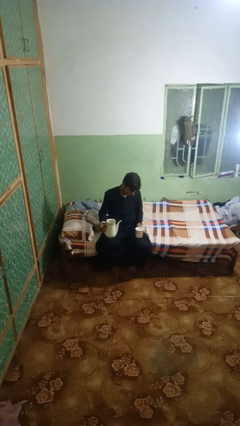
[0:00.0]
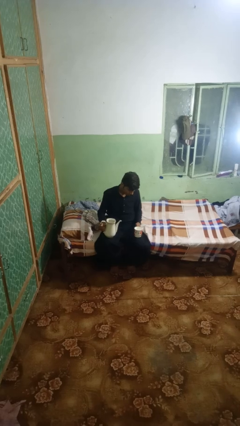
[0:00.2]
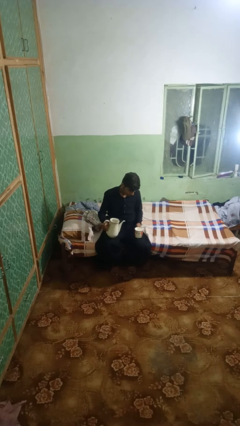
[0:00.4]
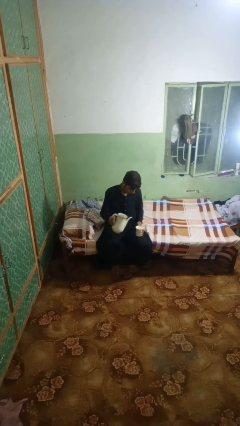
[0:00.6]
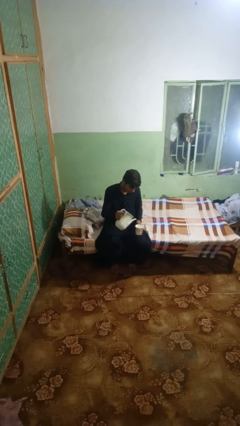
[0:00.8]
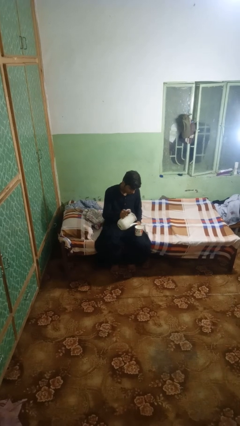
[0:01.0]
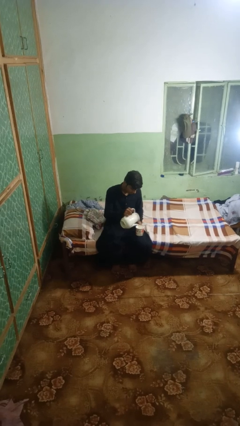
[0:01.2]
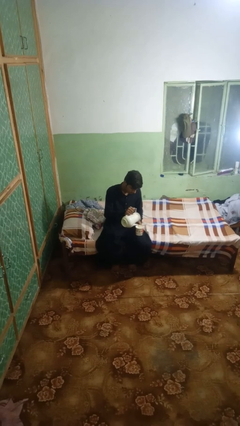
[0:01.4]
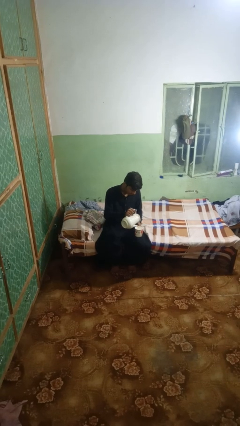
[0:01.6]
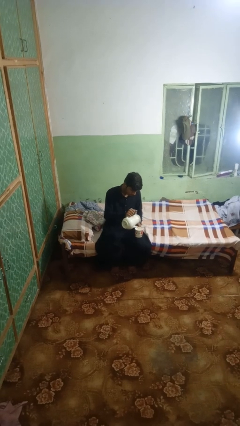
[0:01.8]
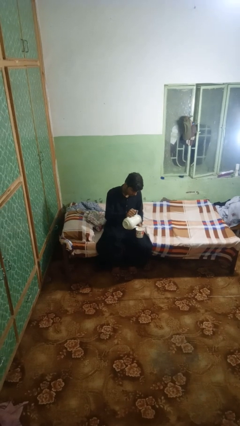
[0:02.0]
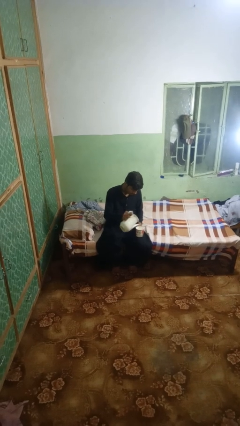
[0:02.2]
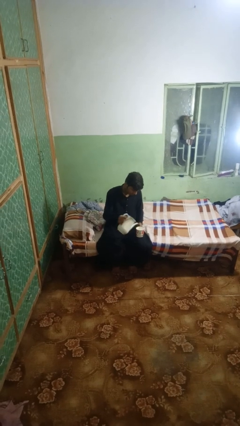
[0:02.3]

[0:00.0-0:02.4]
person pours coffee into mug

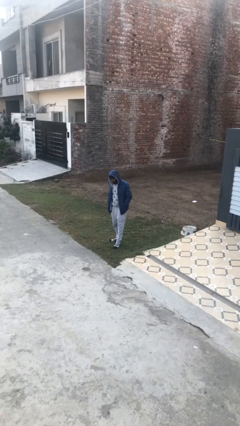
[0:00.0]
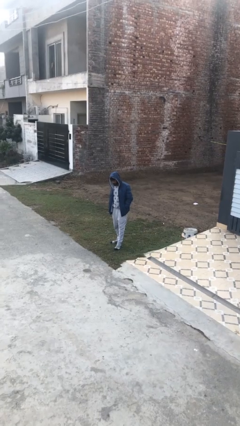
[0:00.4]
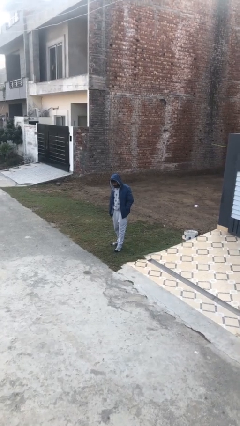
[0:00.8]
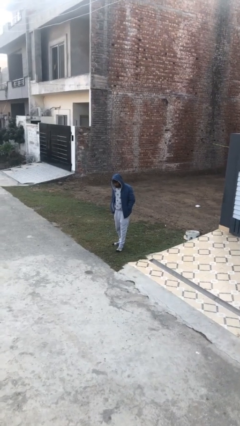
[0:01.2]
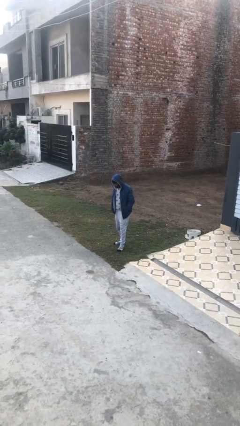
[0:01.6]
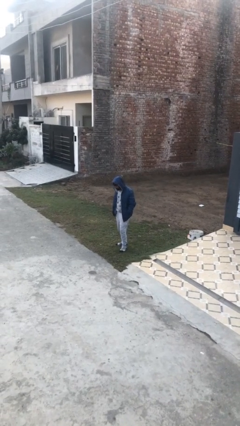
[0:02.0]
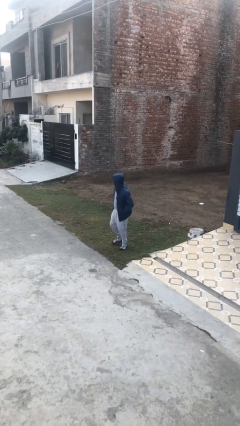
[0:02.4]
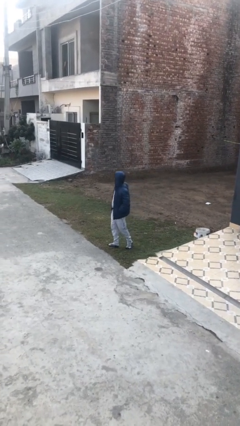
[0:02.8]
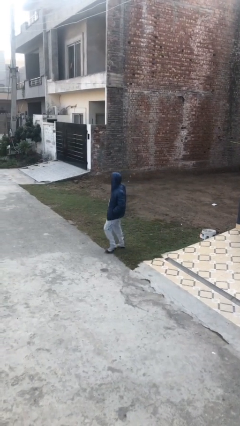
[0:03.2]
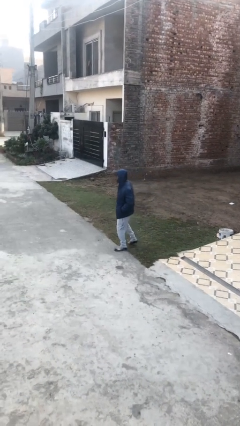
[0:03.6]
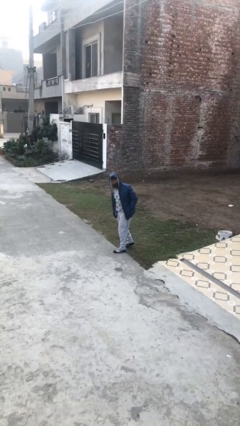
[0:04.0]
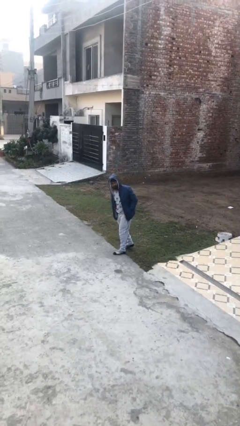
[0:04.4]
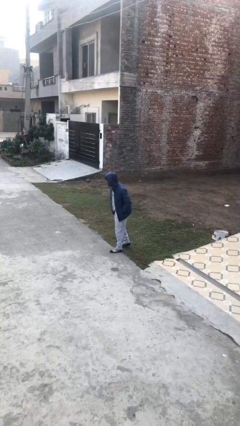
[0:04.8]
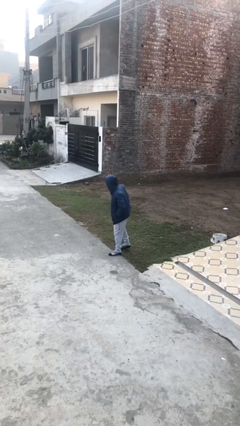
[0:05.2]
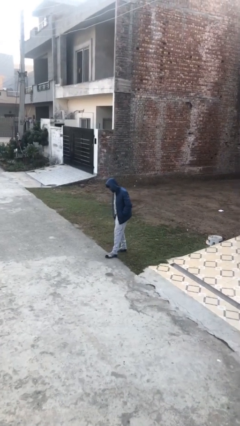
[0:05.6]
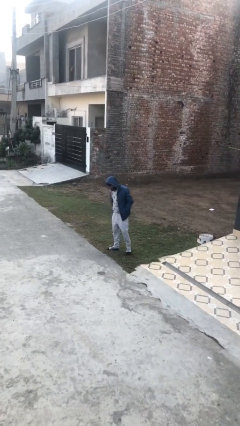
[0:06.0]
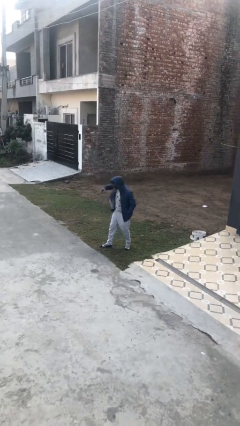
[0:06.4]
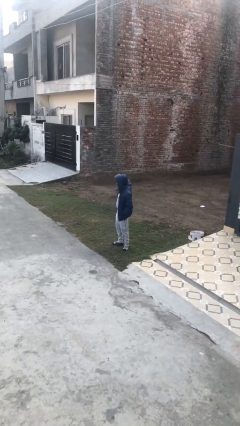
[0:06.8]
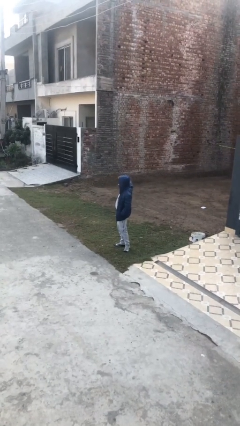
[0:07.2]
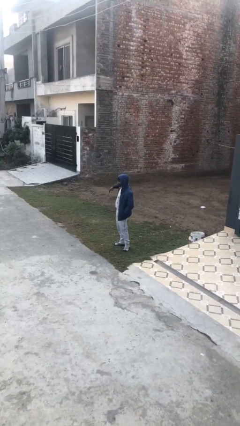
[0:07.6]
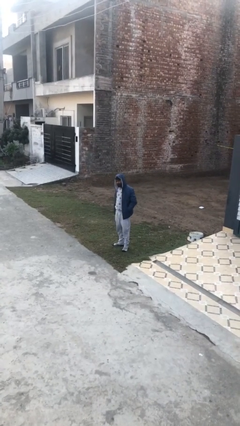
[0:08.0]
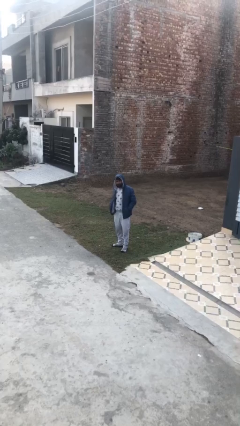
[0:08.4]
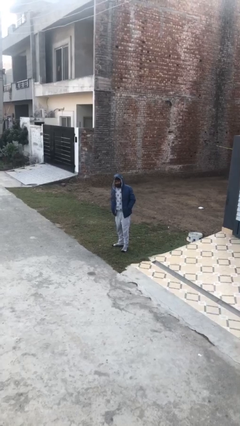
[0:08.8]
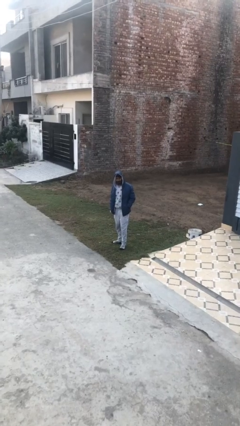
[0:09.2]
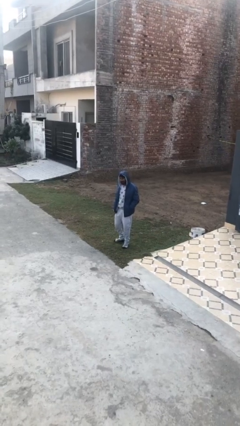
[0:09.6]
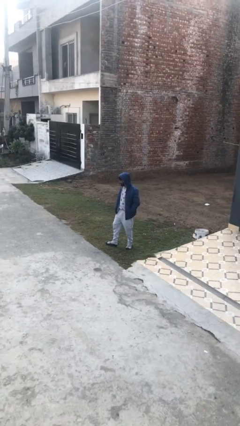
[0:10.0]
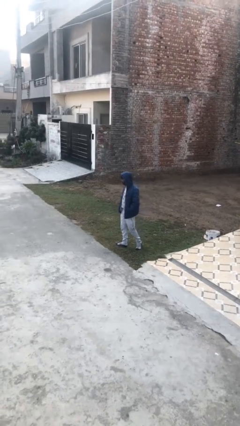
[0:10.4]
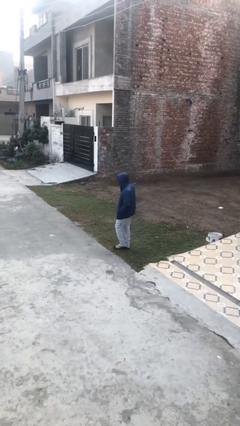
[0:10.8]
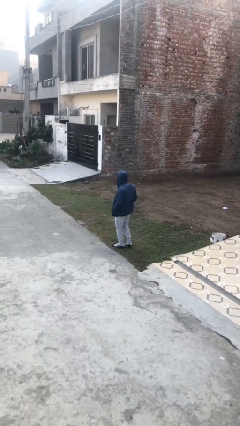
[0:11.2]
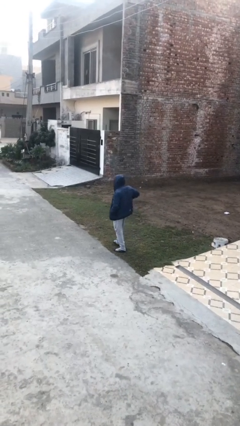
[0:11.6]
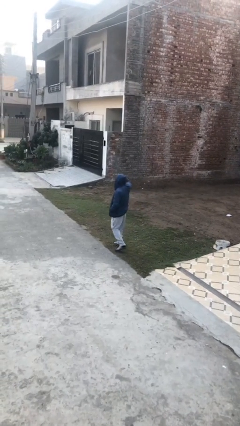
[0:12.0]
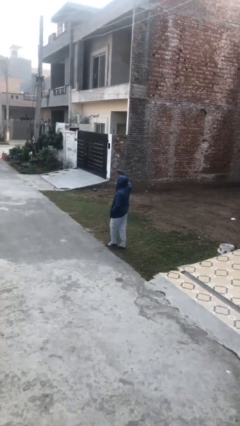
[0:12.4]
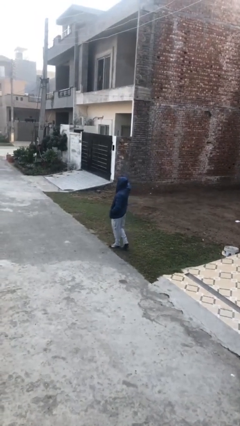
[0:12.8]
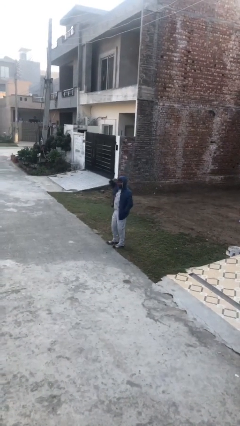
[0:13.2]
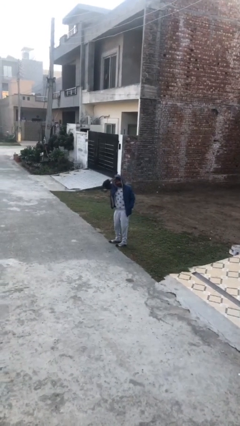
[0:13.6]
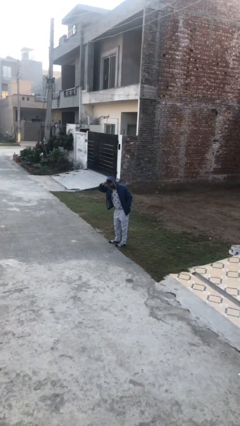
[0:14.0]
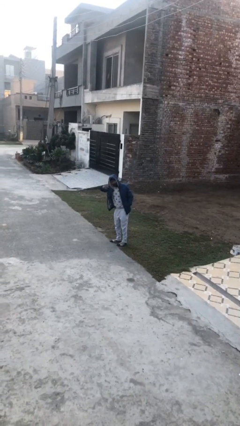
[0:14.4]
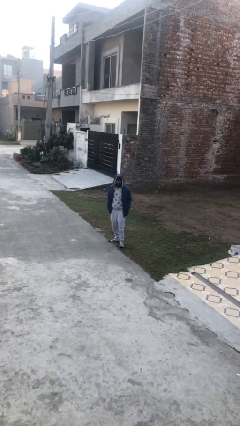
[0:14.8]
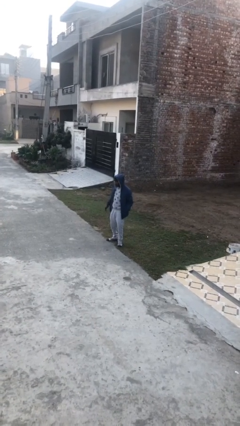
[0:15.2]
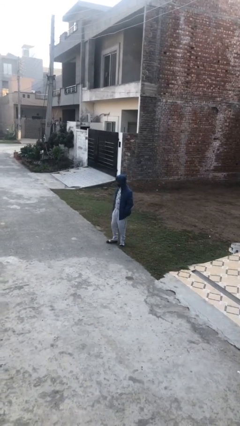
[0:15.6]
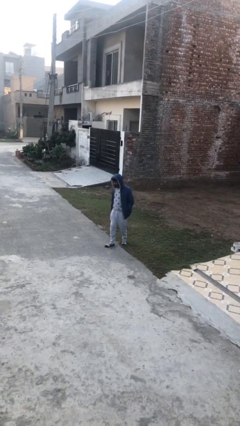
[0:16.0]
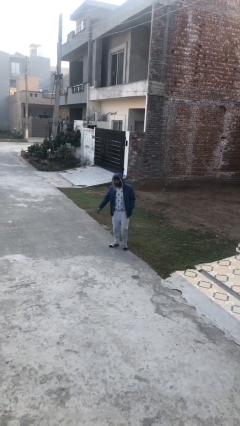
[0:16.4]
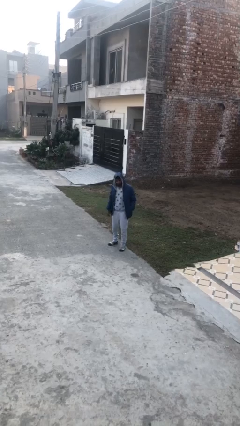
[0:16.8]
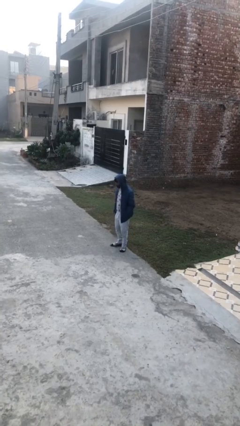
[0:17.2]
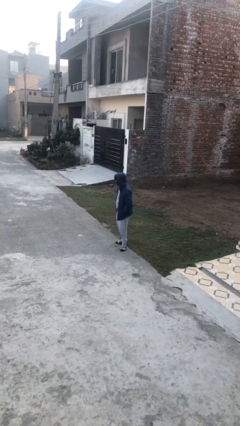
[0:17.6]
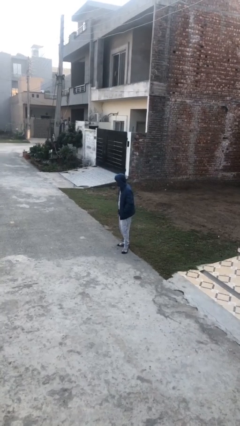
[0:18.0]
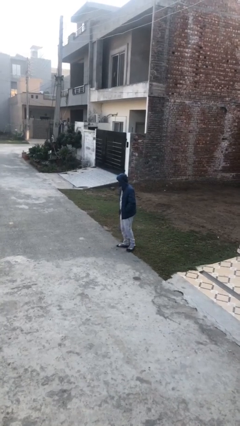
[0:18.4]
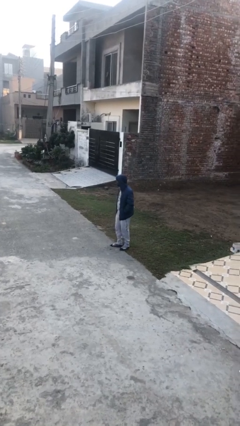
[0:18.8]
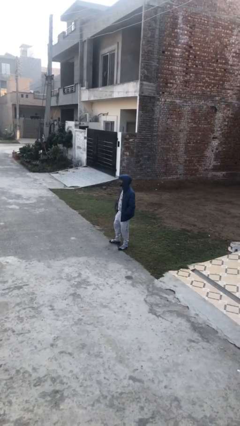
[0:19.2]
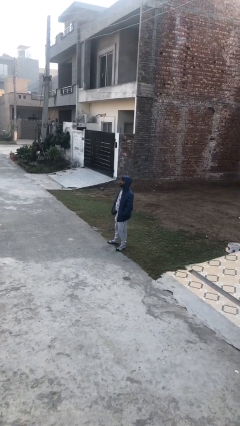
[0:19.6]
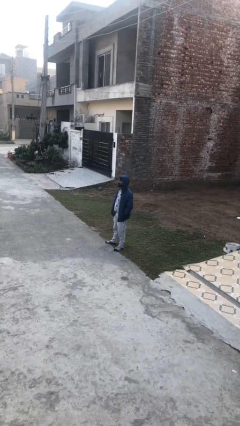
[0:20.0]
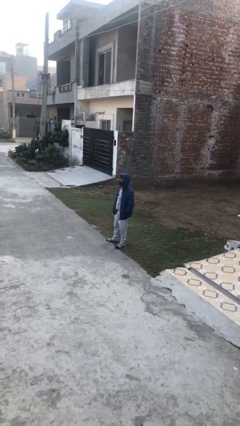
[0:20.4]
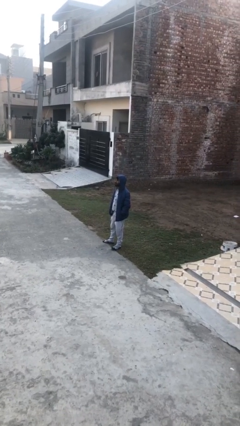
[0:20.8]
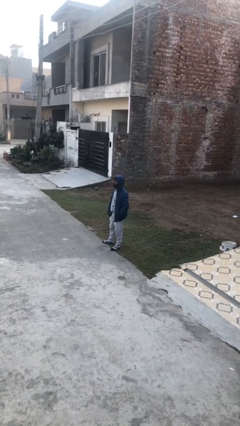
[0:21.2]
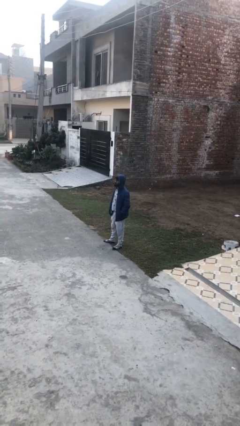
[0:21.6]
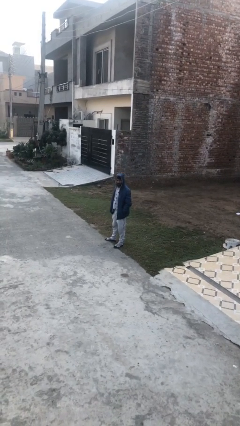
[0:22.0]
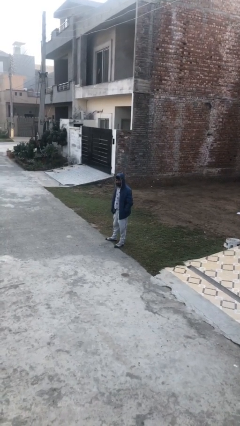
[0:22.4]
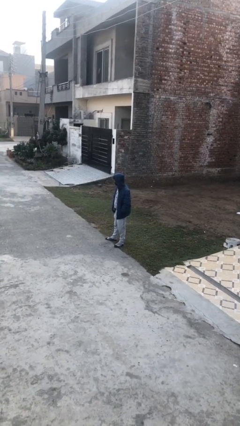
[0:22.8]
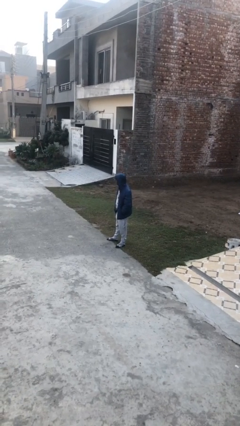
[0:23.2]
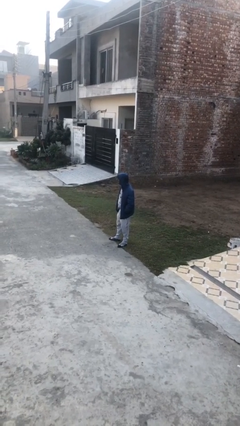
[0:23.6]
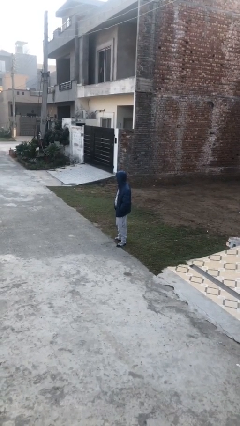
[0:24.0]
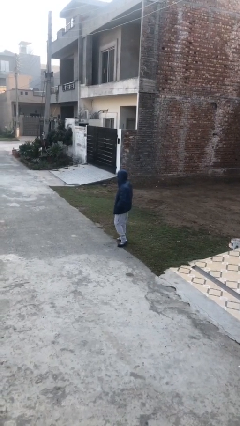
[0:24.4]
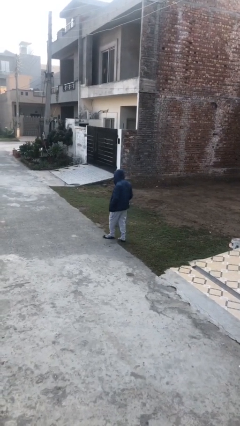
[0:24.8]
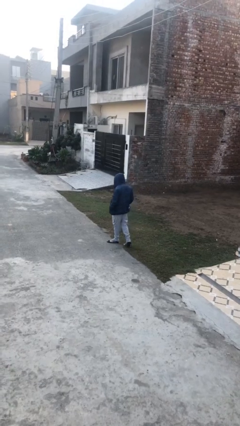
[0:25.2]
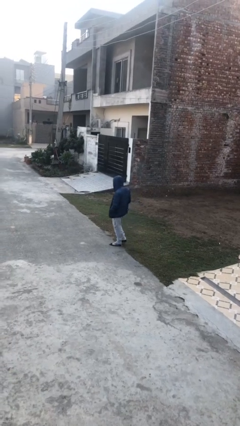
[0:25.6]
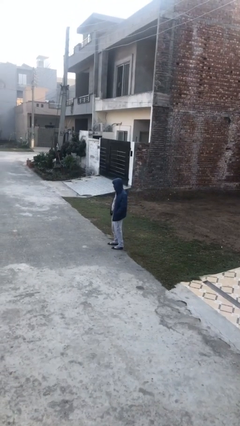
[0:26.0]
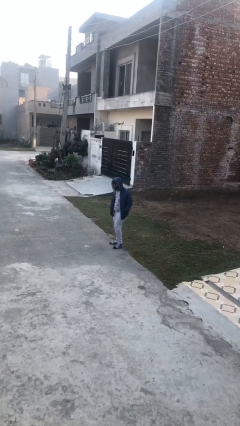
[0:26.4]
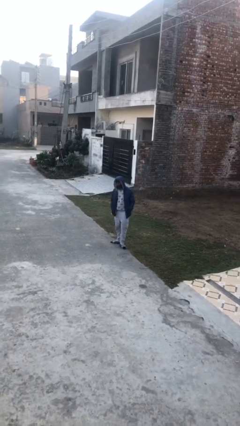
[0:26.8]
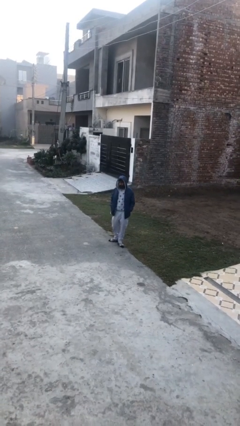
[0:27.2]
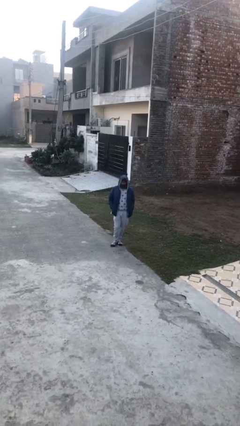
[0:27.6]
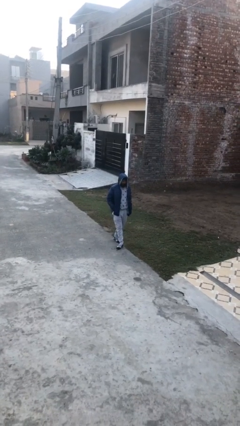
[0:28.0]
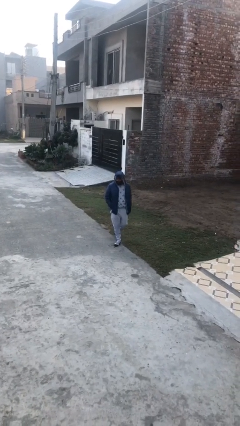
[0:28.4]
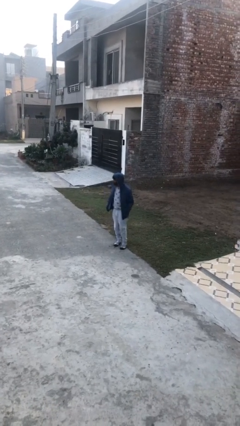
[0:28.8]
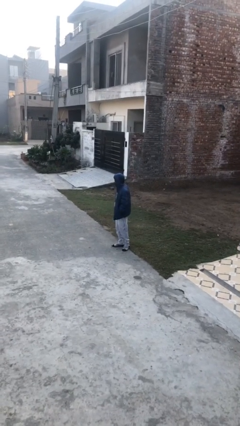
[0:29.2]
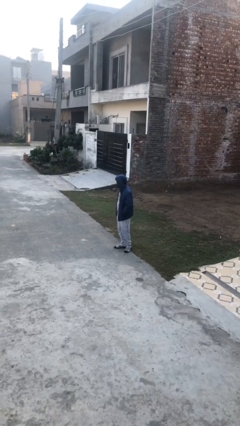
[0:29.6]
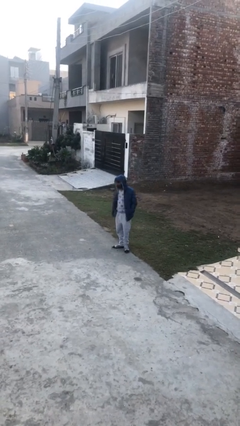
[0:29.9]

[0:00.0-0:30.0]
person walks

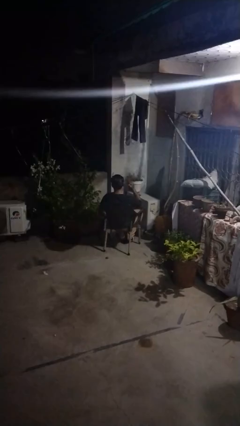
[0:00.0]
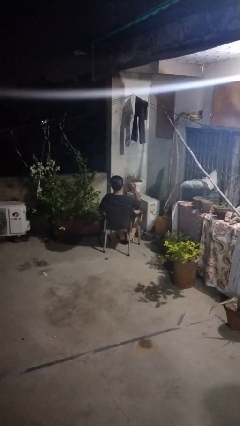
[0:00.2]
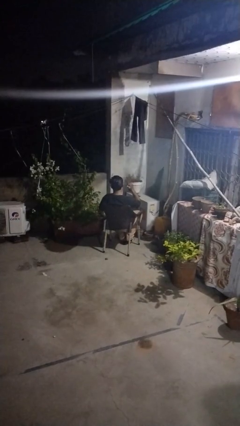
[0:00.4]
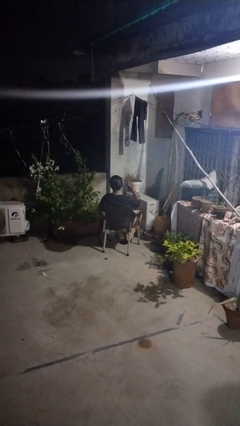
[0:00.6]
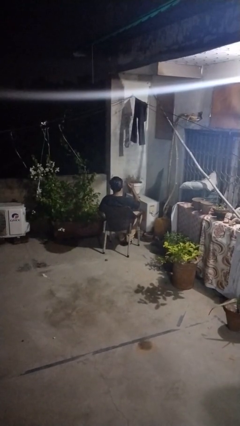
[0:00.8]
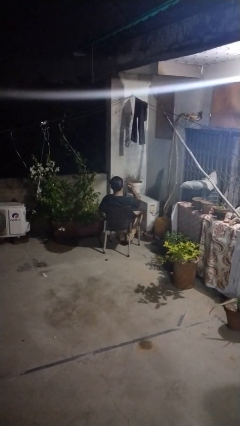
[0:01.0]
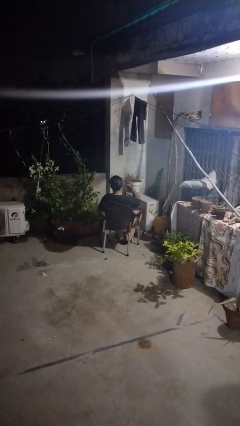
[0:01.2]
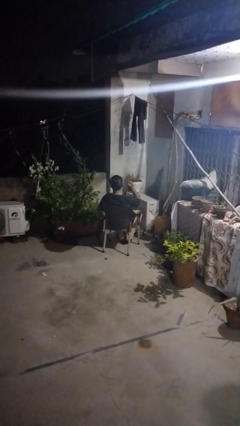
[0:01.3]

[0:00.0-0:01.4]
person gestures behind me
